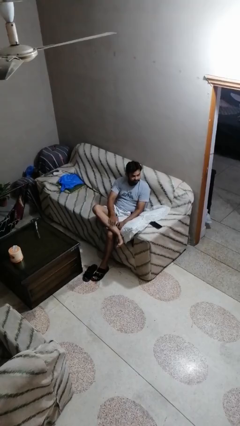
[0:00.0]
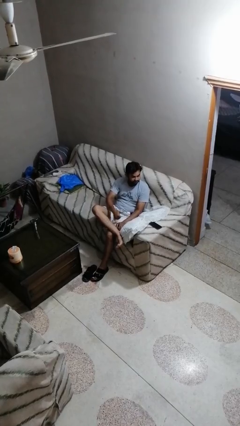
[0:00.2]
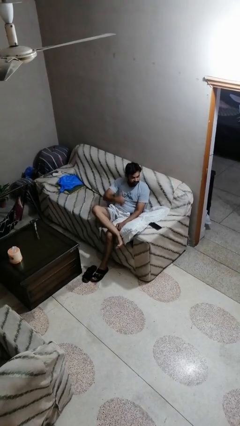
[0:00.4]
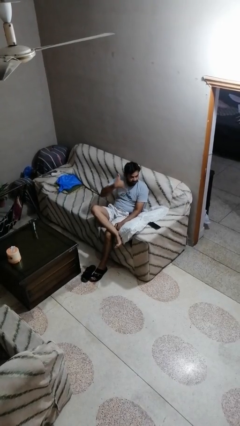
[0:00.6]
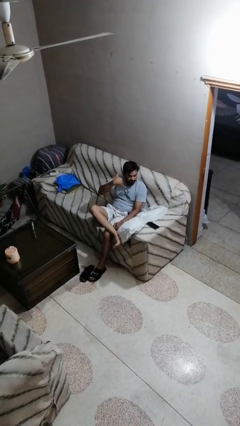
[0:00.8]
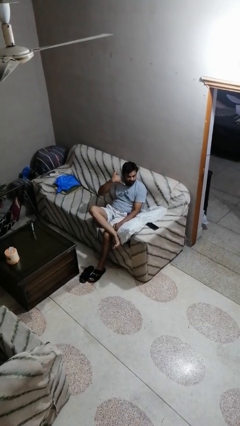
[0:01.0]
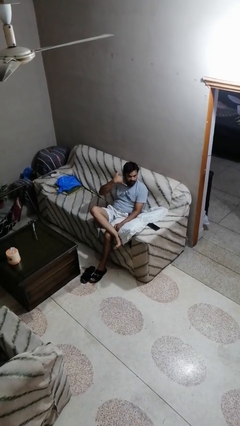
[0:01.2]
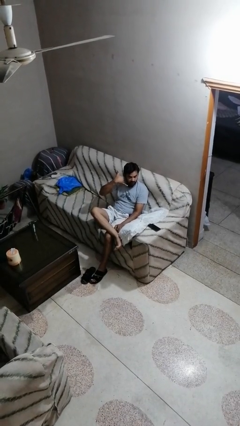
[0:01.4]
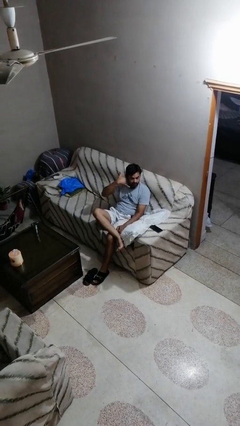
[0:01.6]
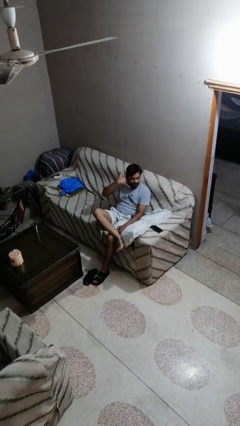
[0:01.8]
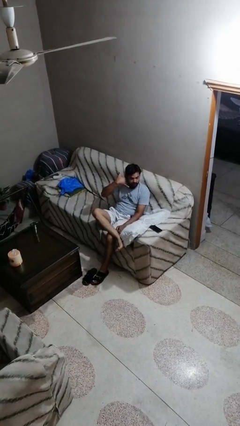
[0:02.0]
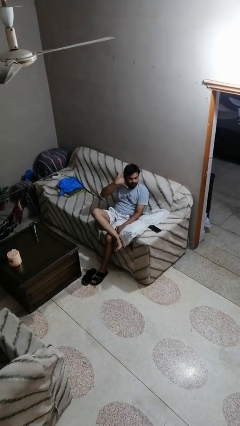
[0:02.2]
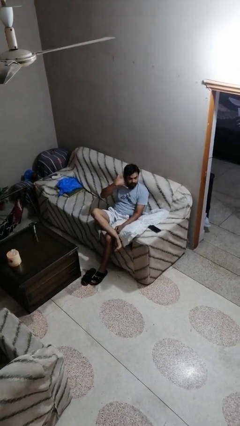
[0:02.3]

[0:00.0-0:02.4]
person gestures call me

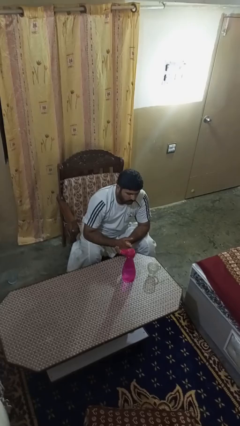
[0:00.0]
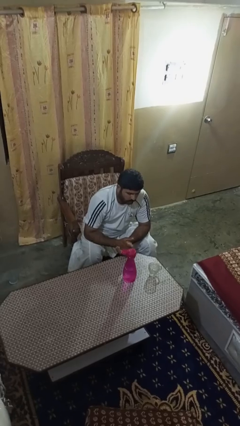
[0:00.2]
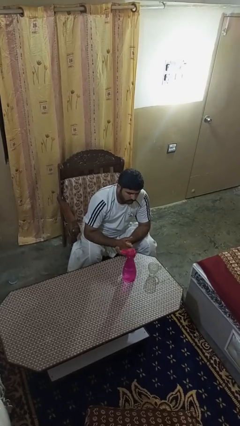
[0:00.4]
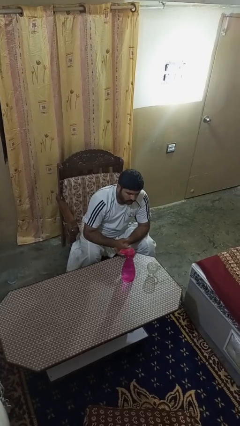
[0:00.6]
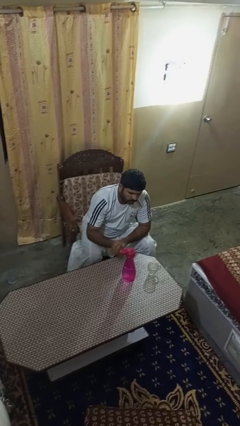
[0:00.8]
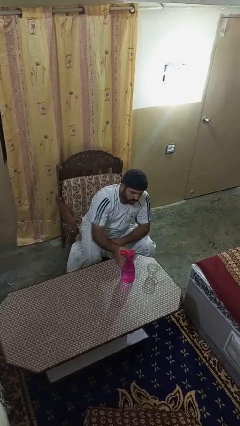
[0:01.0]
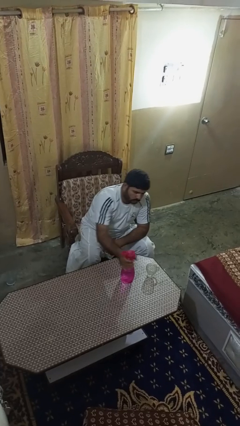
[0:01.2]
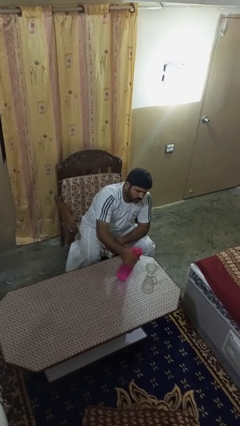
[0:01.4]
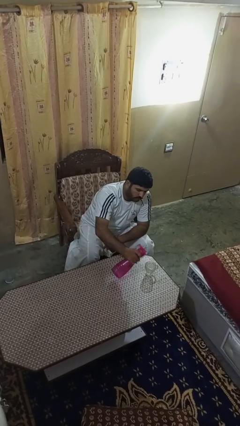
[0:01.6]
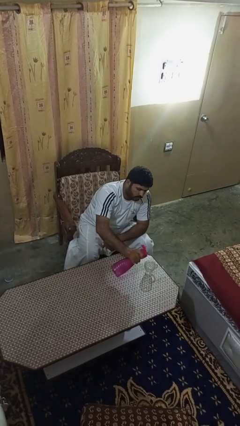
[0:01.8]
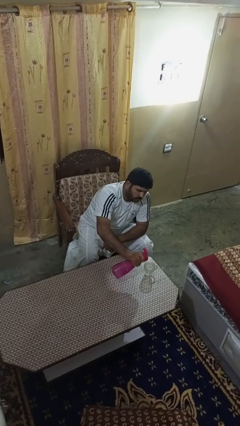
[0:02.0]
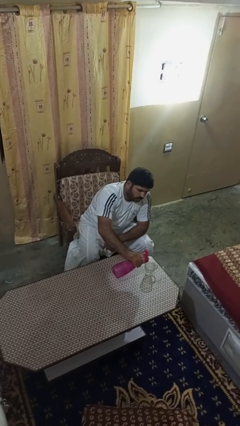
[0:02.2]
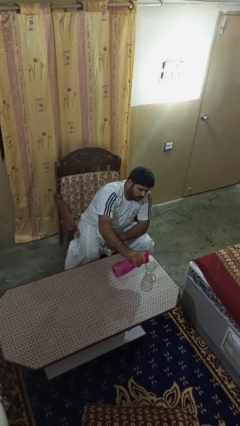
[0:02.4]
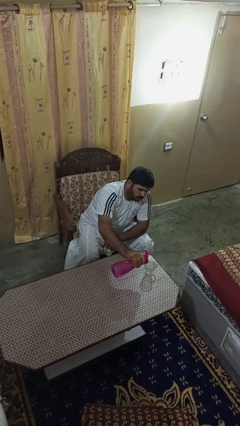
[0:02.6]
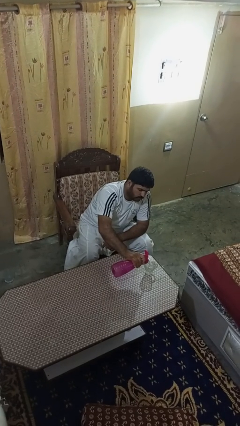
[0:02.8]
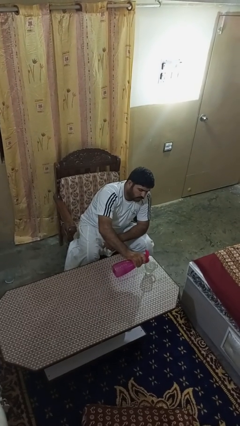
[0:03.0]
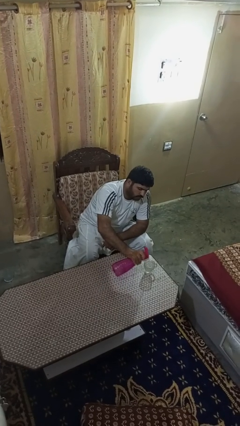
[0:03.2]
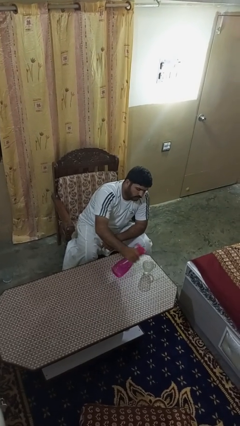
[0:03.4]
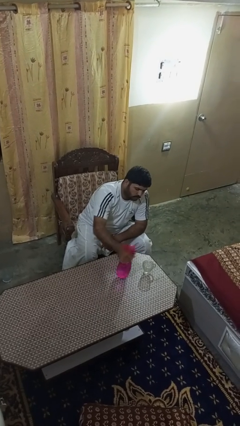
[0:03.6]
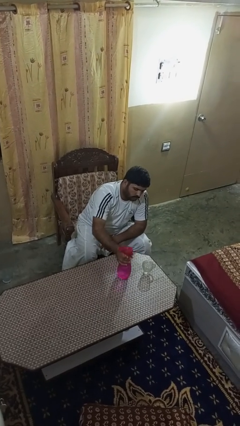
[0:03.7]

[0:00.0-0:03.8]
person pours liquid into cup

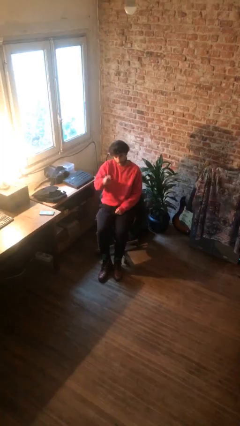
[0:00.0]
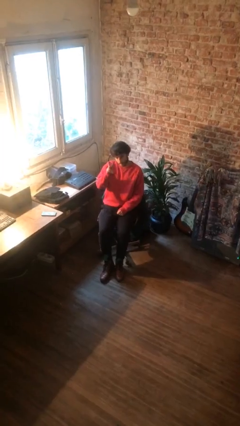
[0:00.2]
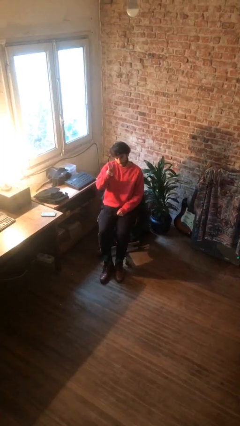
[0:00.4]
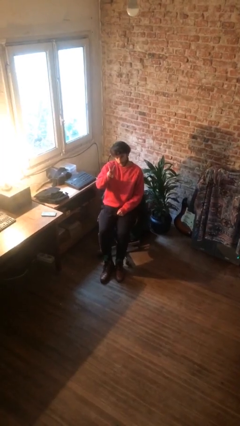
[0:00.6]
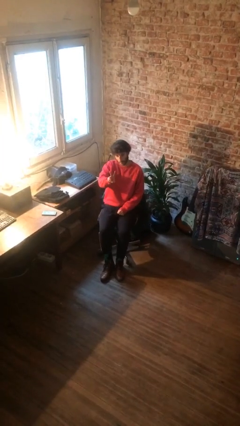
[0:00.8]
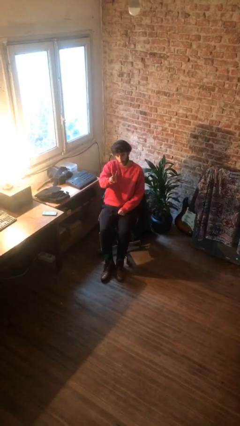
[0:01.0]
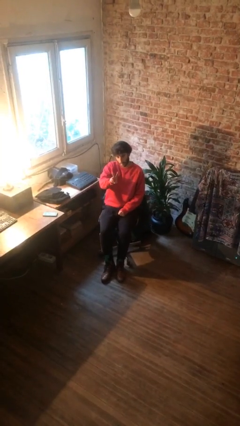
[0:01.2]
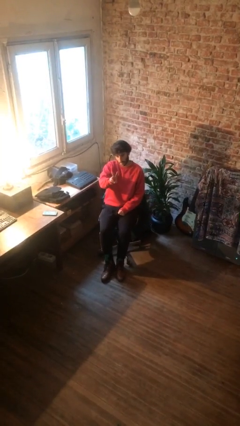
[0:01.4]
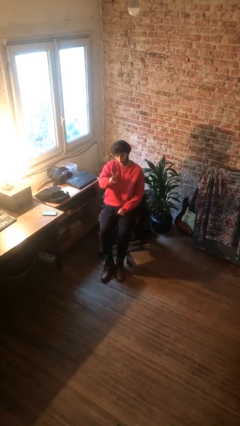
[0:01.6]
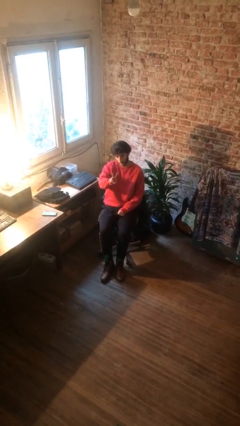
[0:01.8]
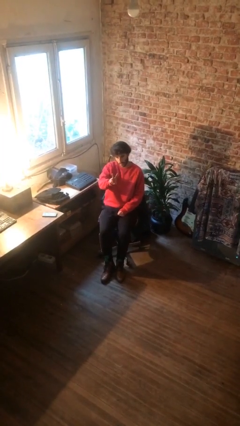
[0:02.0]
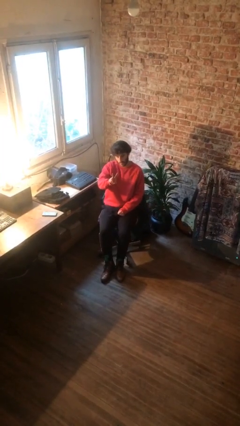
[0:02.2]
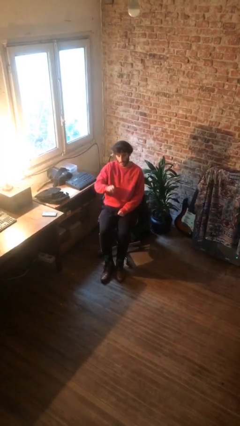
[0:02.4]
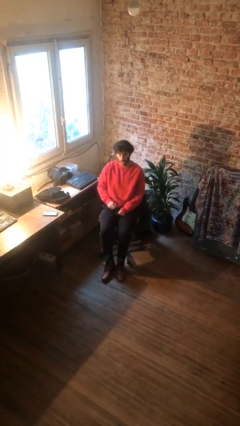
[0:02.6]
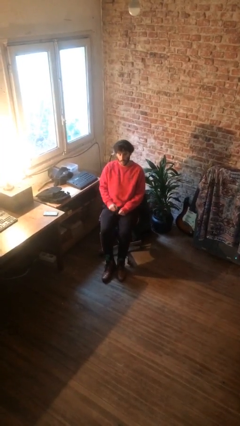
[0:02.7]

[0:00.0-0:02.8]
person gestures peace

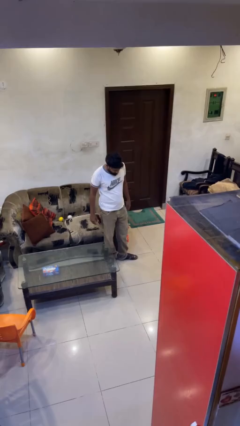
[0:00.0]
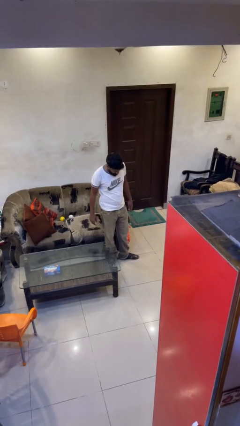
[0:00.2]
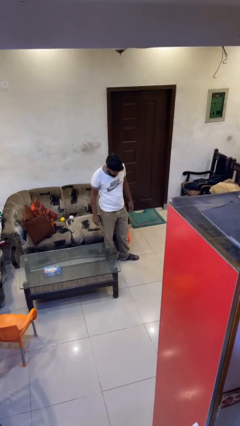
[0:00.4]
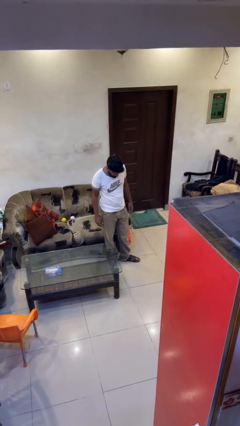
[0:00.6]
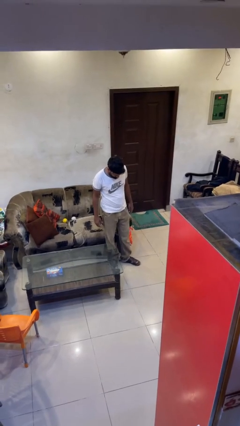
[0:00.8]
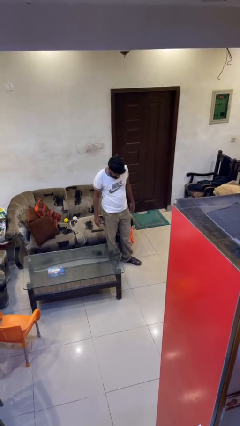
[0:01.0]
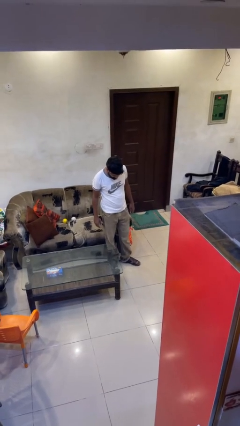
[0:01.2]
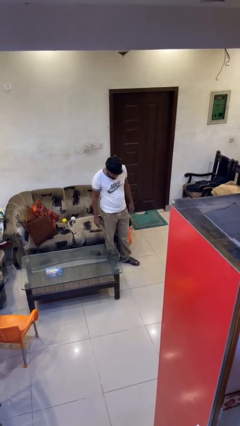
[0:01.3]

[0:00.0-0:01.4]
person puts hands in back pockets

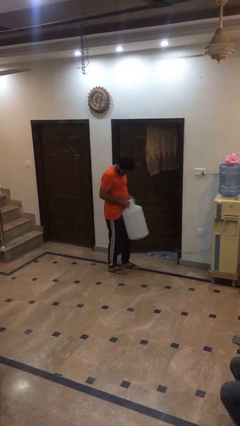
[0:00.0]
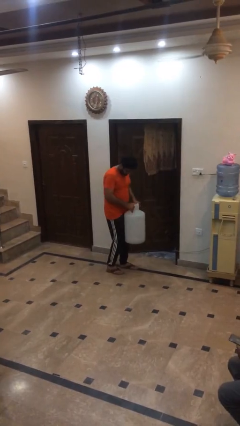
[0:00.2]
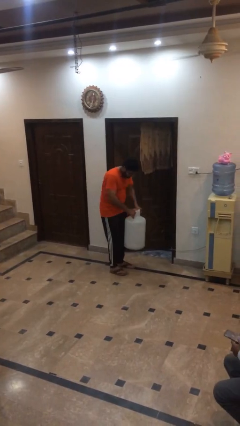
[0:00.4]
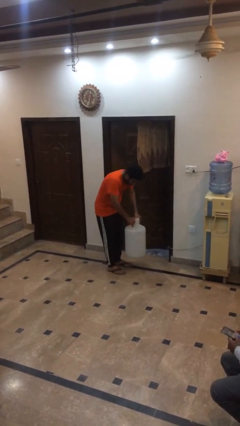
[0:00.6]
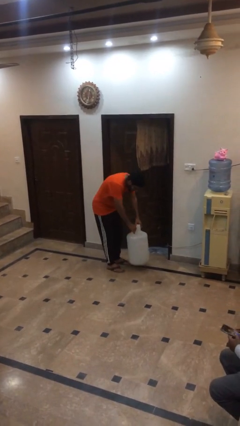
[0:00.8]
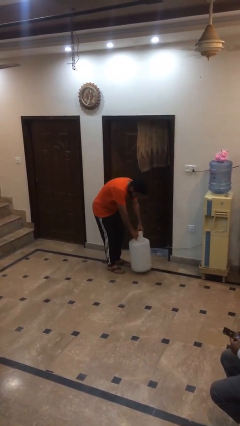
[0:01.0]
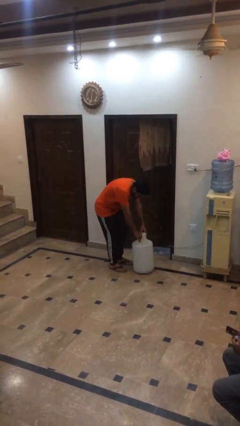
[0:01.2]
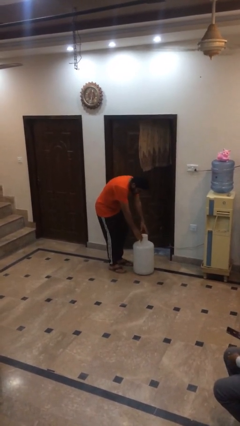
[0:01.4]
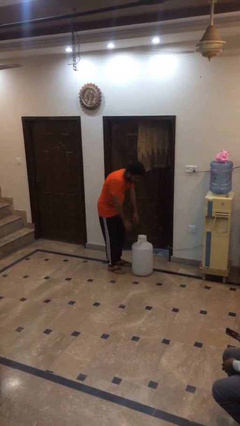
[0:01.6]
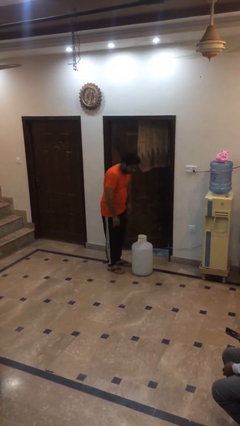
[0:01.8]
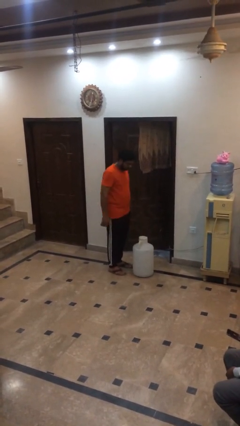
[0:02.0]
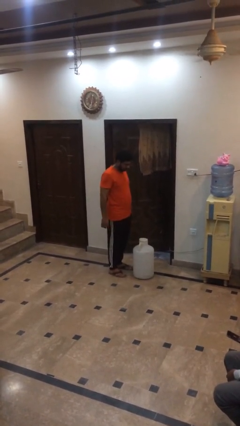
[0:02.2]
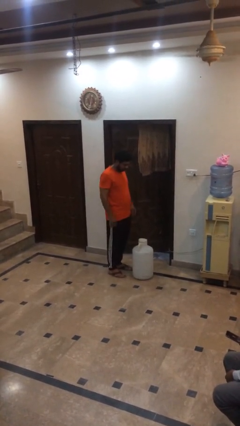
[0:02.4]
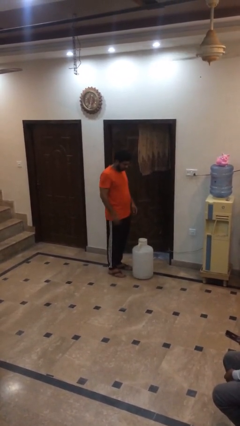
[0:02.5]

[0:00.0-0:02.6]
person puts down object on floor

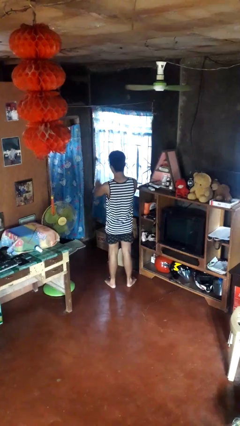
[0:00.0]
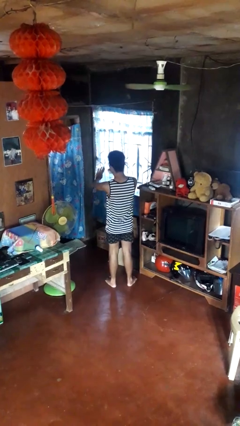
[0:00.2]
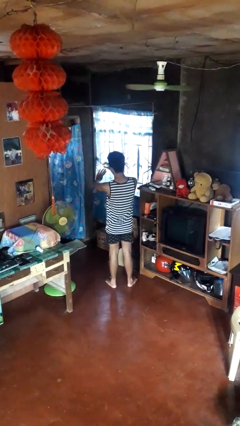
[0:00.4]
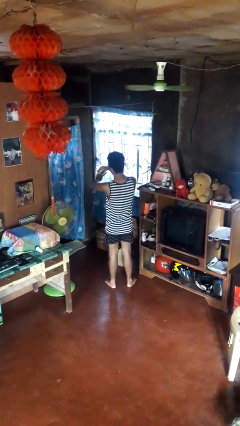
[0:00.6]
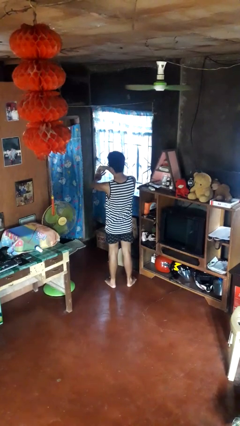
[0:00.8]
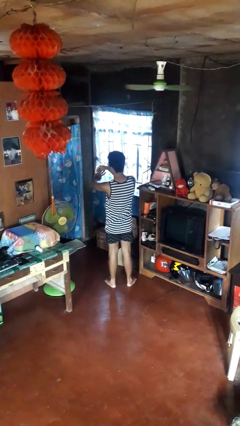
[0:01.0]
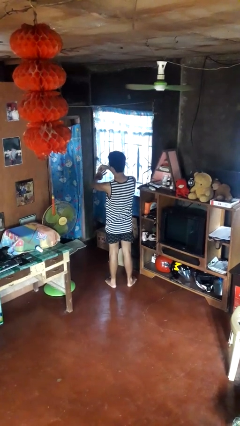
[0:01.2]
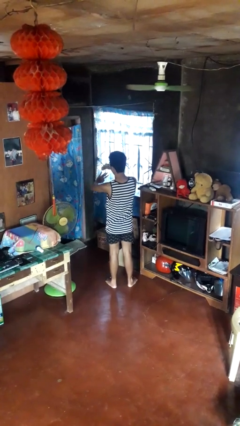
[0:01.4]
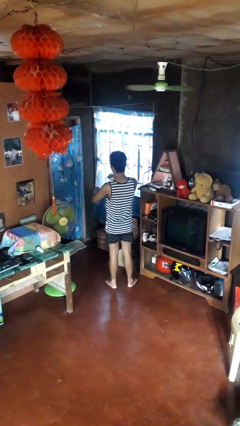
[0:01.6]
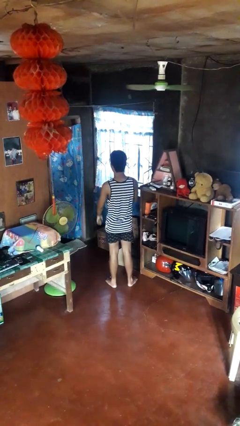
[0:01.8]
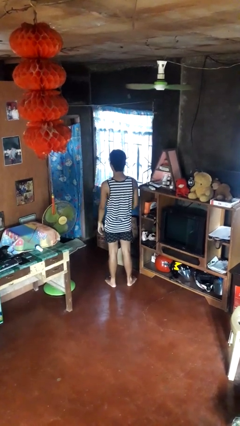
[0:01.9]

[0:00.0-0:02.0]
person takes off ring

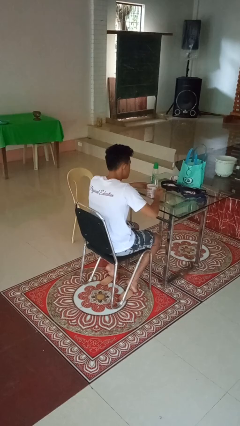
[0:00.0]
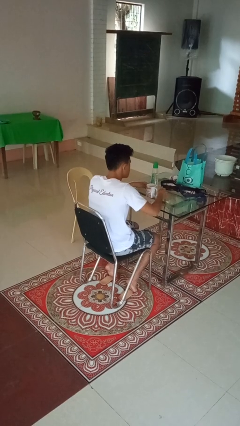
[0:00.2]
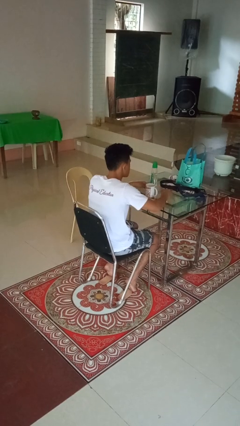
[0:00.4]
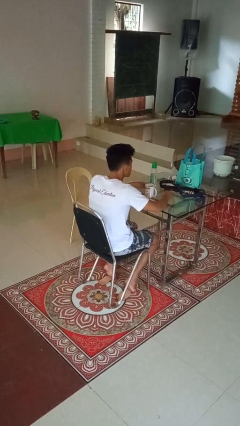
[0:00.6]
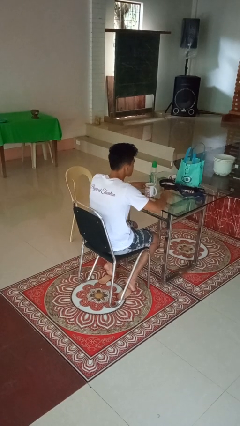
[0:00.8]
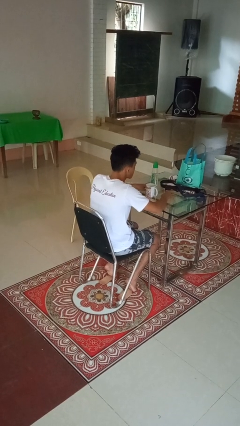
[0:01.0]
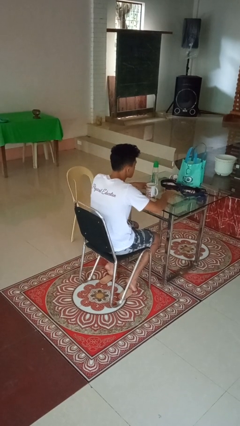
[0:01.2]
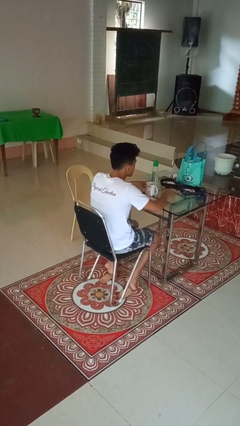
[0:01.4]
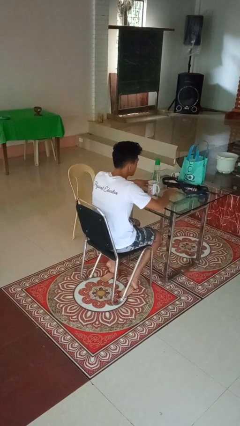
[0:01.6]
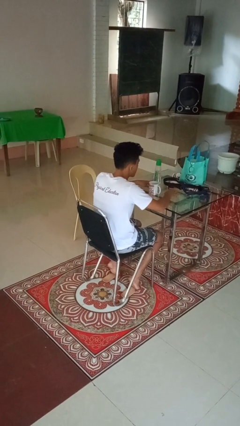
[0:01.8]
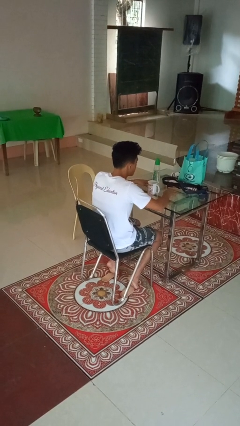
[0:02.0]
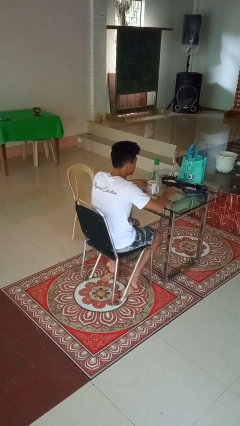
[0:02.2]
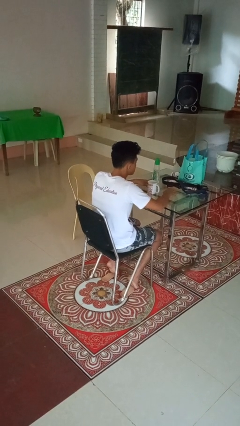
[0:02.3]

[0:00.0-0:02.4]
person puts down object on table
